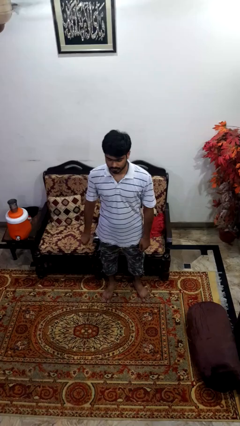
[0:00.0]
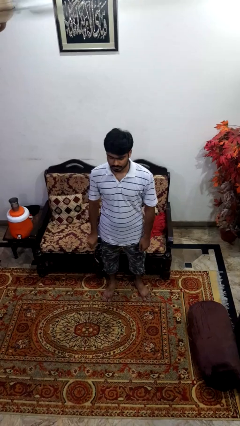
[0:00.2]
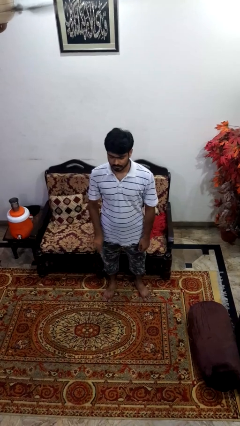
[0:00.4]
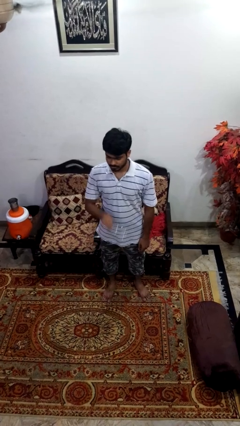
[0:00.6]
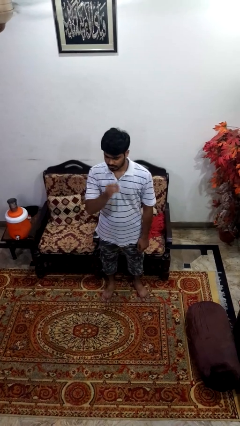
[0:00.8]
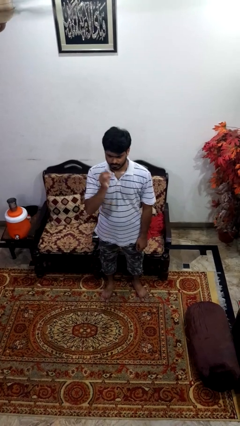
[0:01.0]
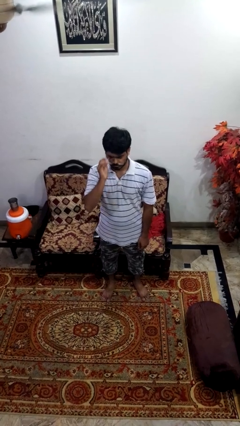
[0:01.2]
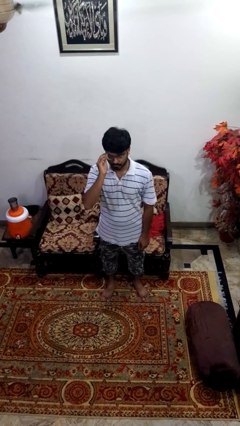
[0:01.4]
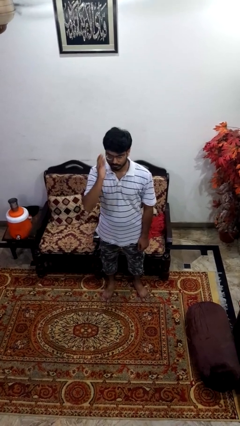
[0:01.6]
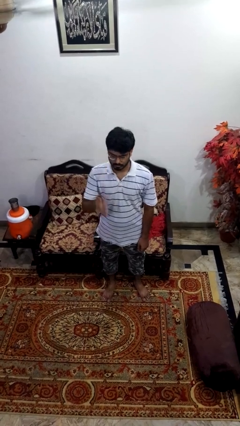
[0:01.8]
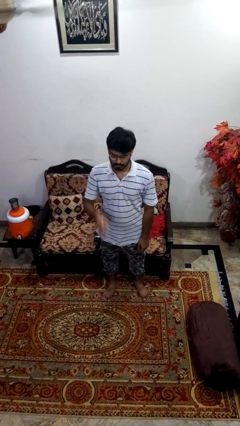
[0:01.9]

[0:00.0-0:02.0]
person puts on glasses

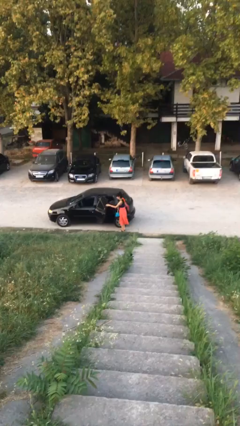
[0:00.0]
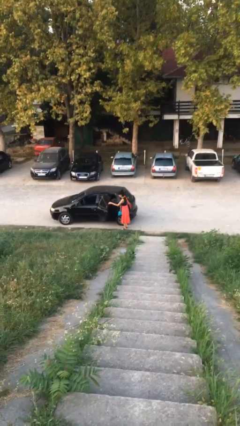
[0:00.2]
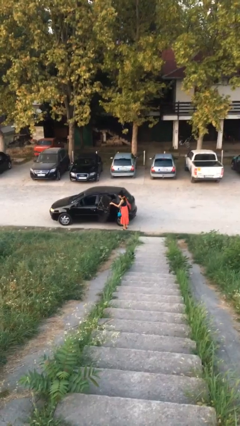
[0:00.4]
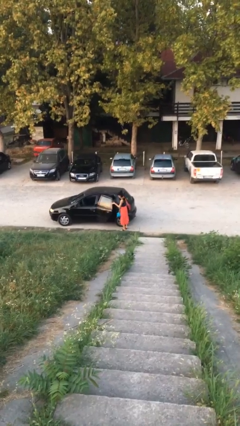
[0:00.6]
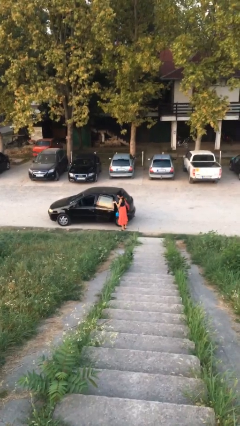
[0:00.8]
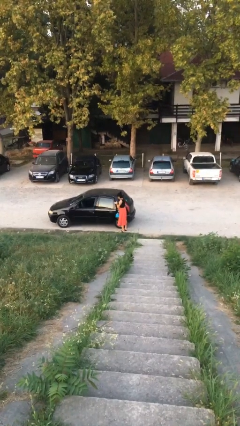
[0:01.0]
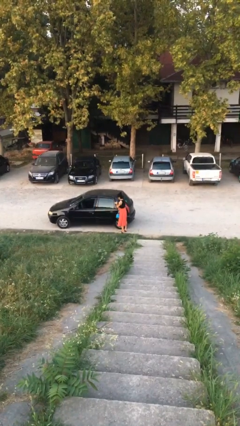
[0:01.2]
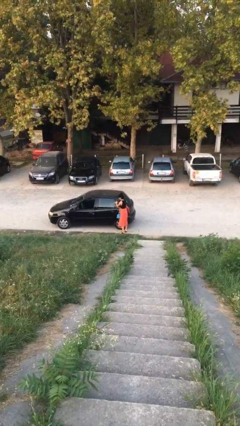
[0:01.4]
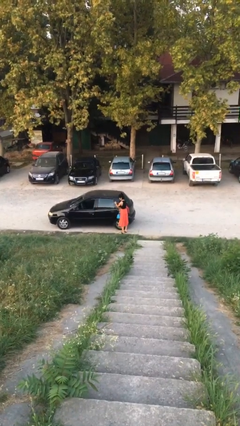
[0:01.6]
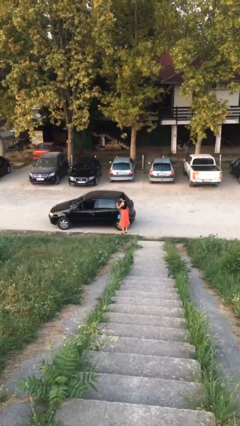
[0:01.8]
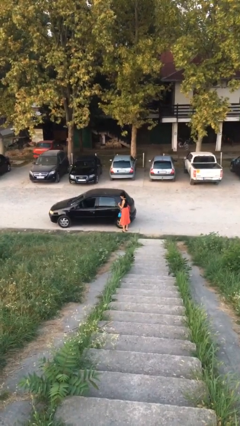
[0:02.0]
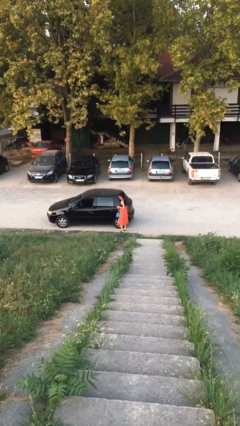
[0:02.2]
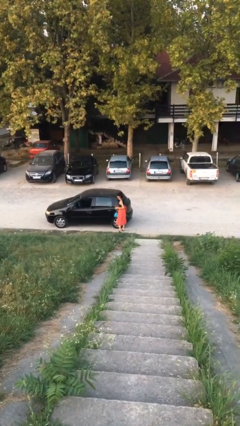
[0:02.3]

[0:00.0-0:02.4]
person closes car door

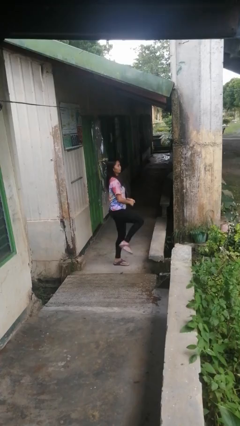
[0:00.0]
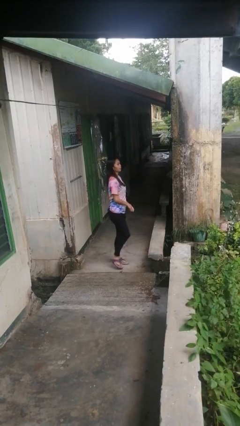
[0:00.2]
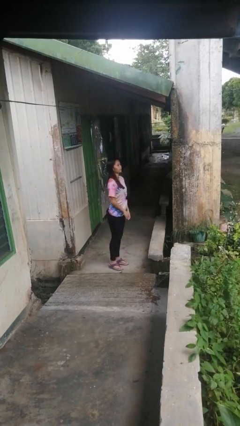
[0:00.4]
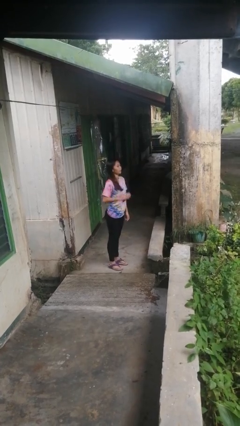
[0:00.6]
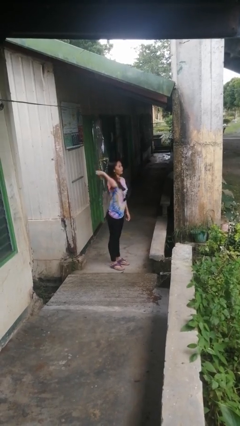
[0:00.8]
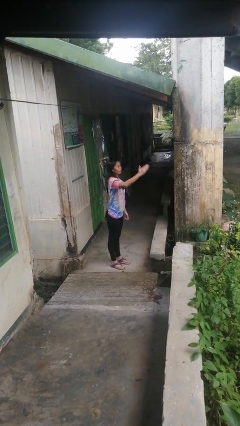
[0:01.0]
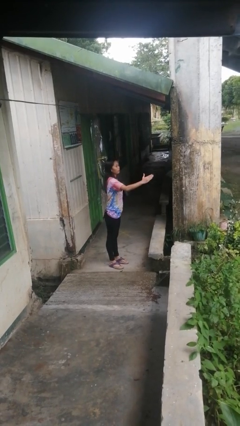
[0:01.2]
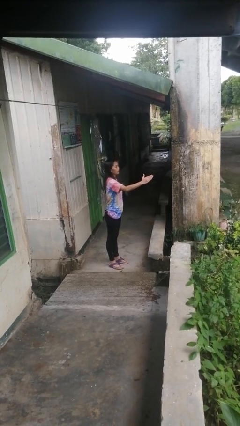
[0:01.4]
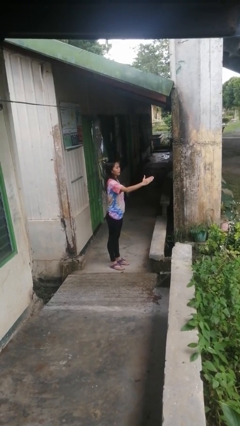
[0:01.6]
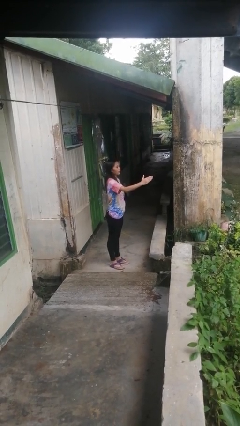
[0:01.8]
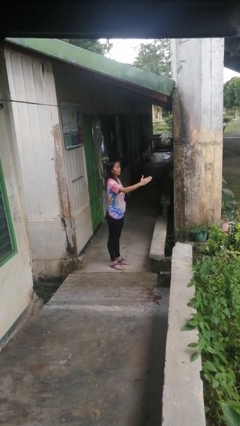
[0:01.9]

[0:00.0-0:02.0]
person karate chop

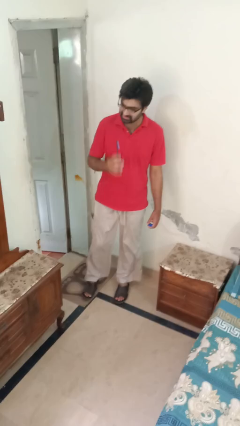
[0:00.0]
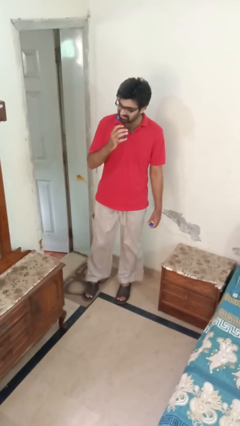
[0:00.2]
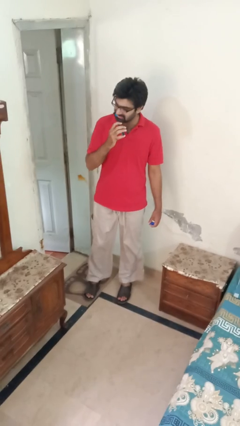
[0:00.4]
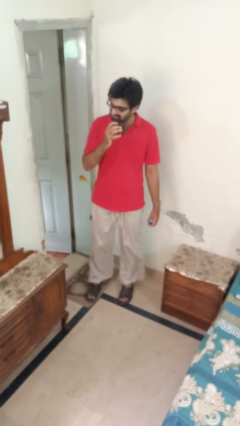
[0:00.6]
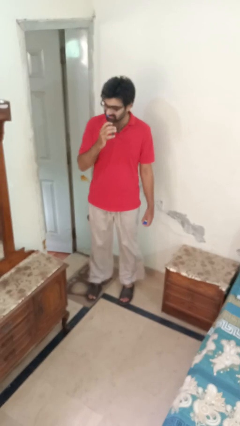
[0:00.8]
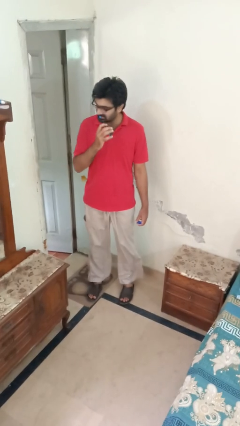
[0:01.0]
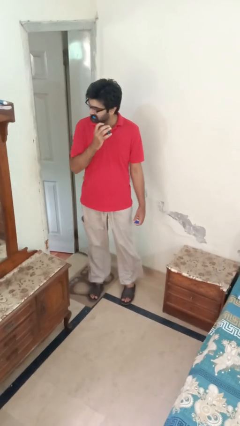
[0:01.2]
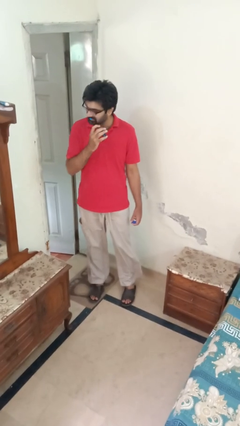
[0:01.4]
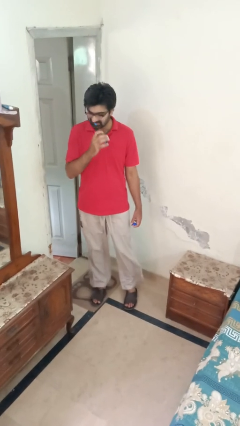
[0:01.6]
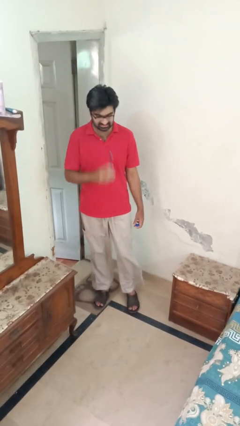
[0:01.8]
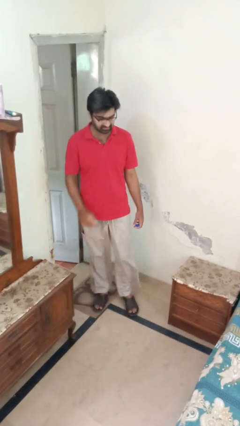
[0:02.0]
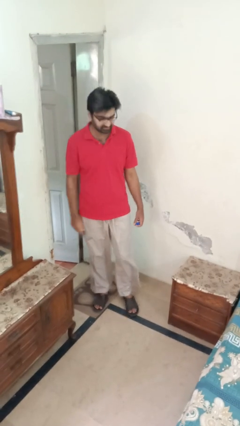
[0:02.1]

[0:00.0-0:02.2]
person brushes teeth

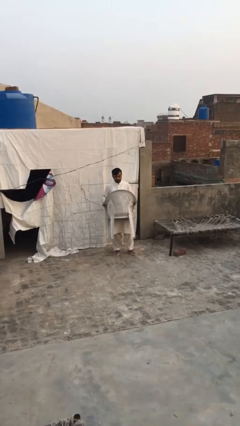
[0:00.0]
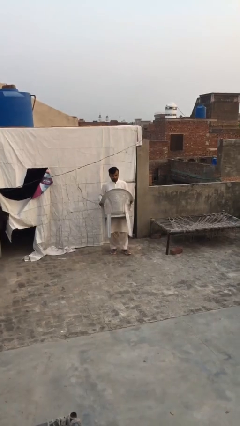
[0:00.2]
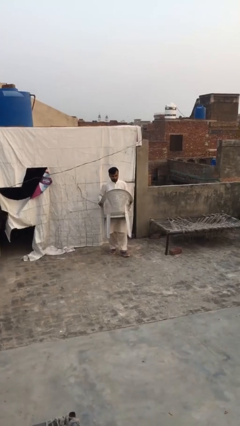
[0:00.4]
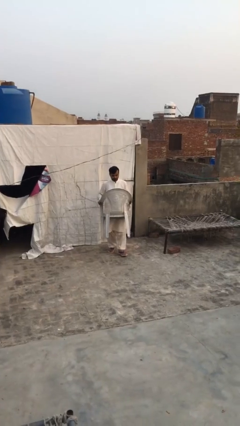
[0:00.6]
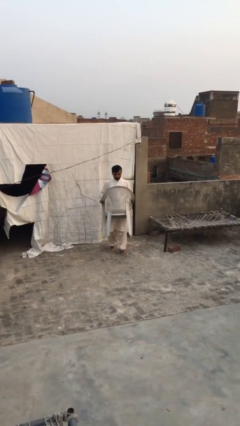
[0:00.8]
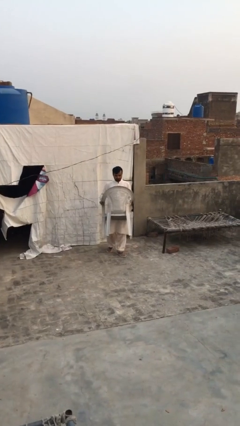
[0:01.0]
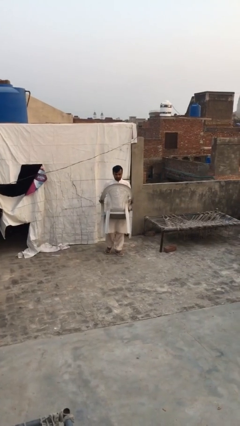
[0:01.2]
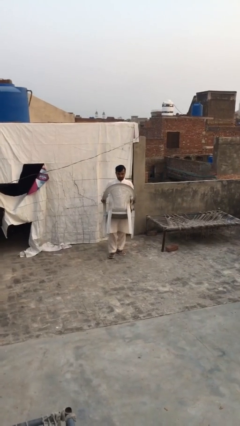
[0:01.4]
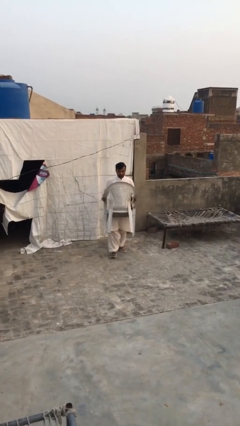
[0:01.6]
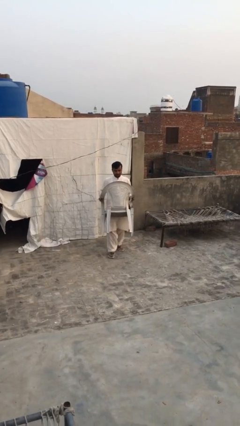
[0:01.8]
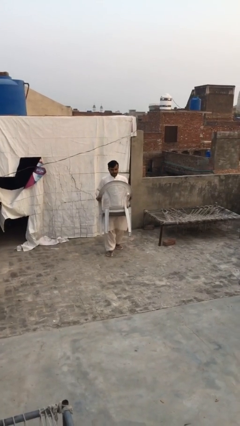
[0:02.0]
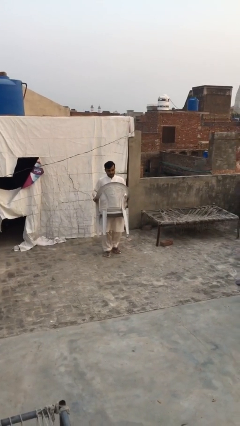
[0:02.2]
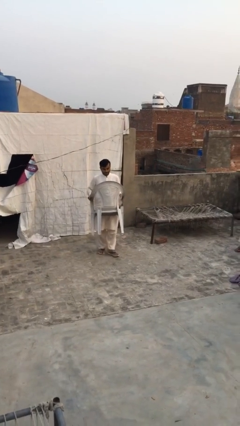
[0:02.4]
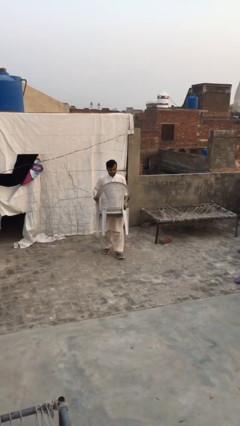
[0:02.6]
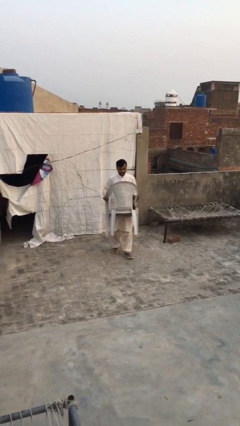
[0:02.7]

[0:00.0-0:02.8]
person carries heavy object

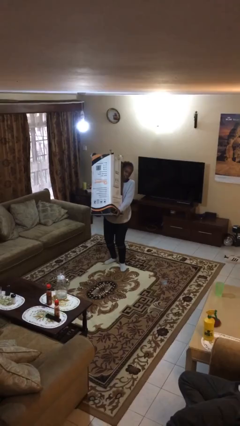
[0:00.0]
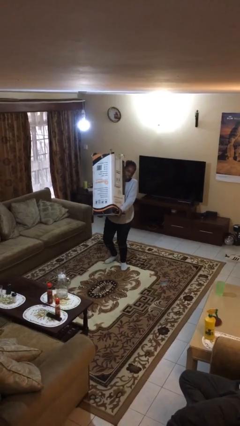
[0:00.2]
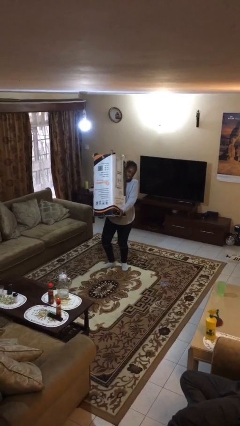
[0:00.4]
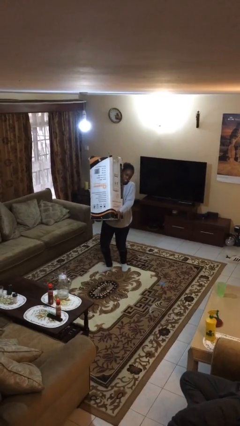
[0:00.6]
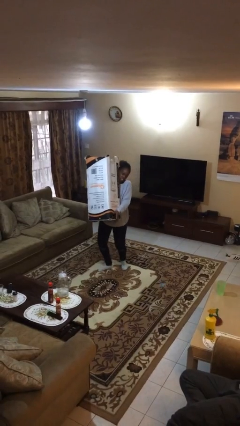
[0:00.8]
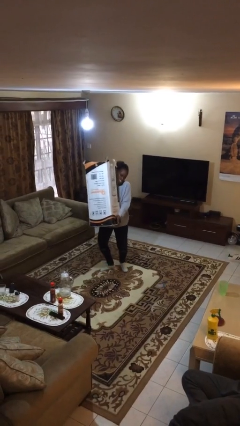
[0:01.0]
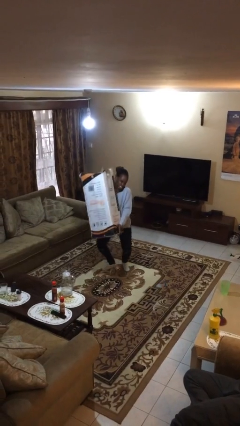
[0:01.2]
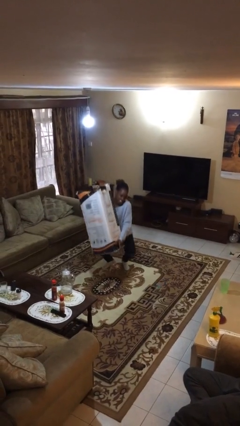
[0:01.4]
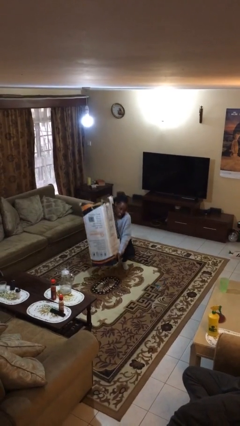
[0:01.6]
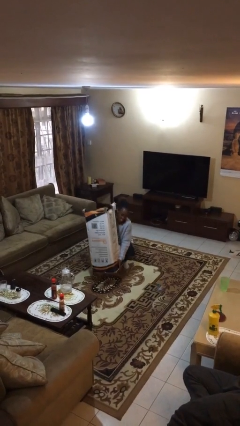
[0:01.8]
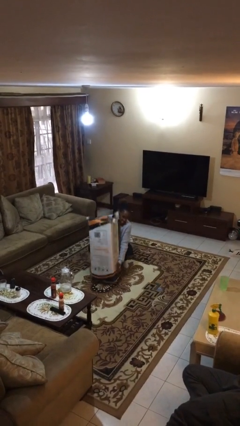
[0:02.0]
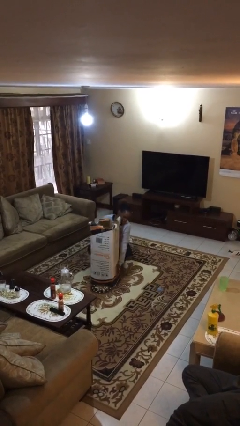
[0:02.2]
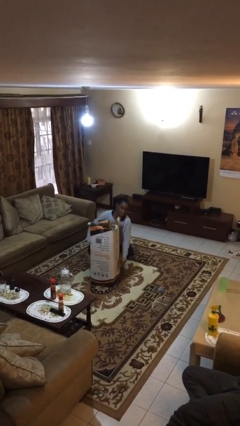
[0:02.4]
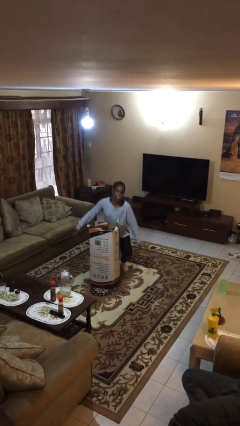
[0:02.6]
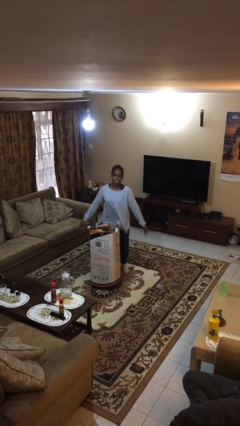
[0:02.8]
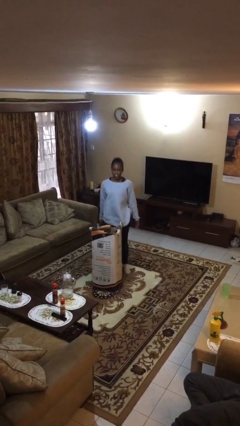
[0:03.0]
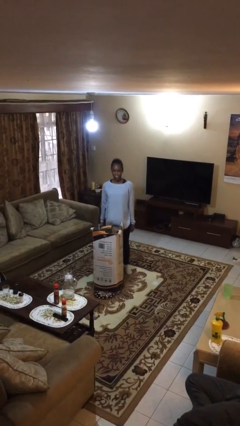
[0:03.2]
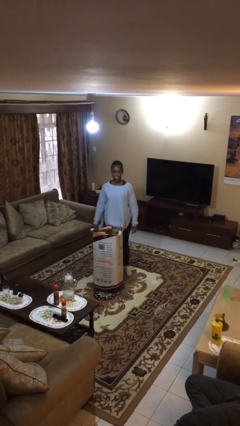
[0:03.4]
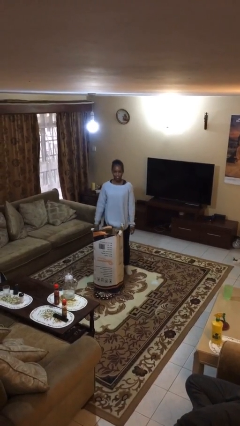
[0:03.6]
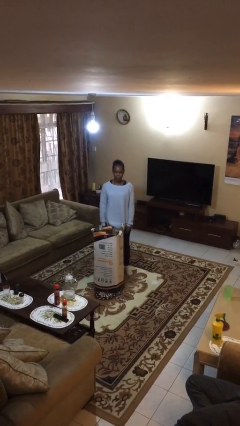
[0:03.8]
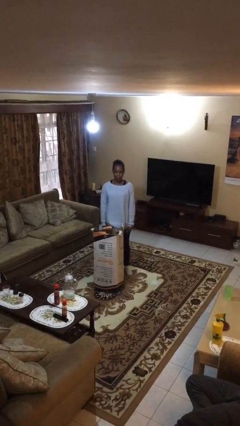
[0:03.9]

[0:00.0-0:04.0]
person puts down object on floor

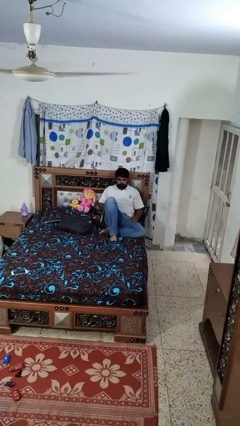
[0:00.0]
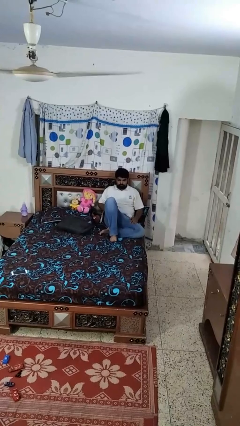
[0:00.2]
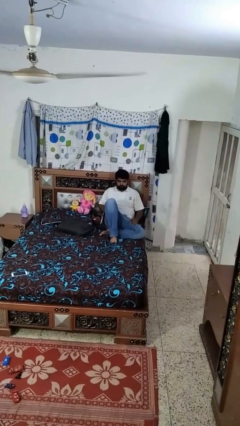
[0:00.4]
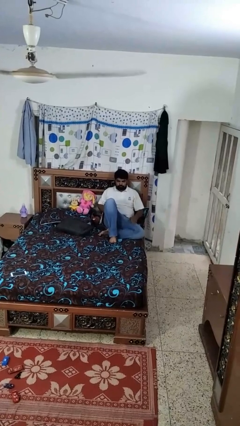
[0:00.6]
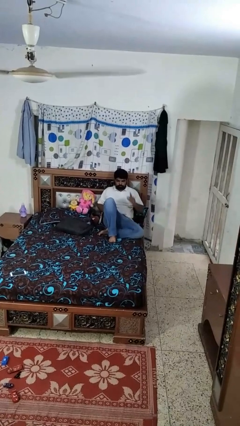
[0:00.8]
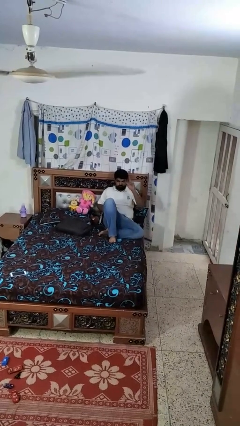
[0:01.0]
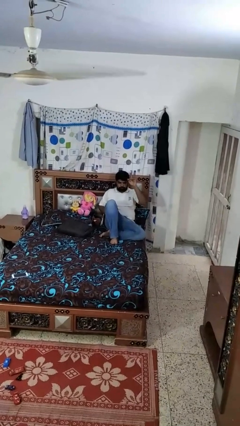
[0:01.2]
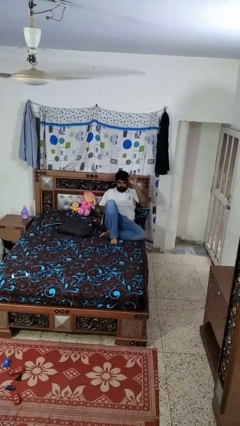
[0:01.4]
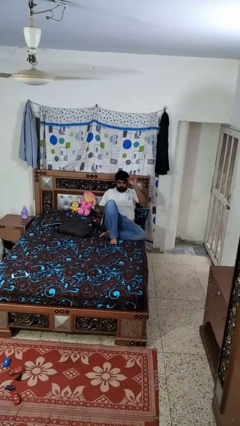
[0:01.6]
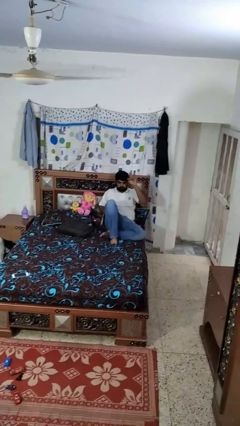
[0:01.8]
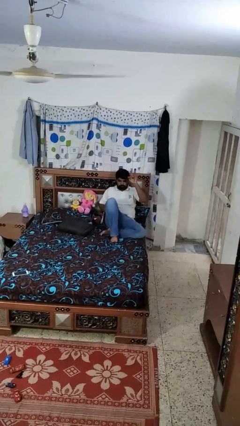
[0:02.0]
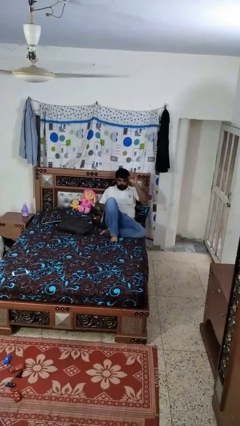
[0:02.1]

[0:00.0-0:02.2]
person gestures raise hand
